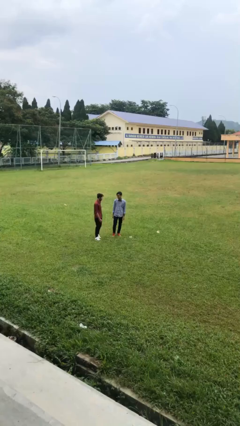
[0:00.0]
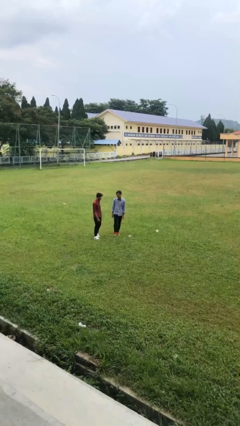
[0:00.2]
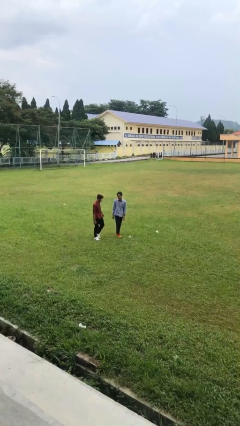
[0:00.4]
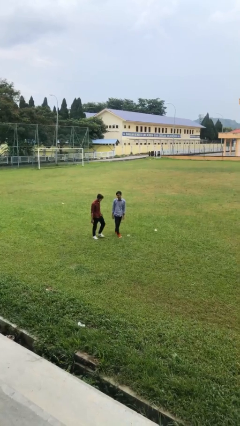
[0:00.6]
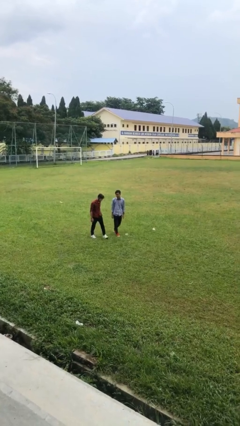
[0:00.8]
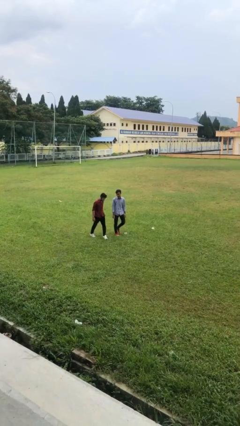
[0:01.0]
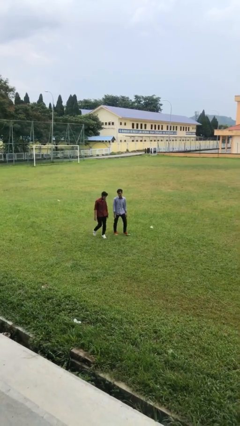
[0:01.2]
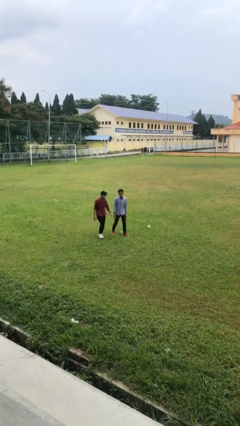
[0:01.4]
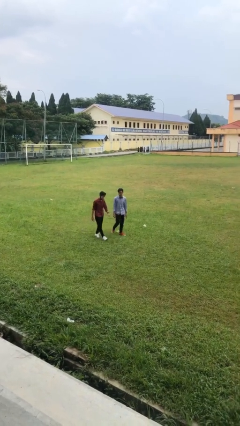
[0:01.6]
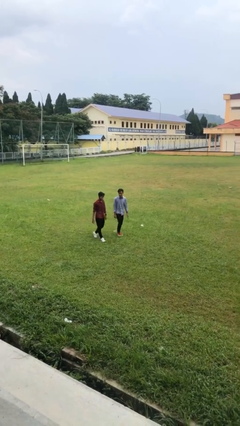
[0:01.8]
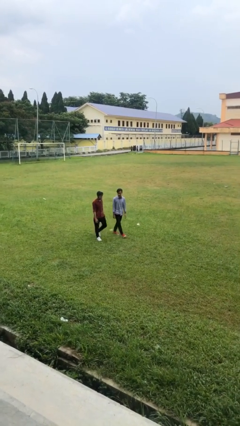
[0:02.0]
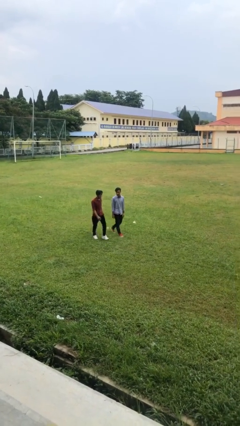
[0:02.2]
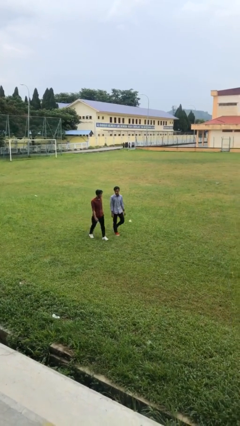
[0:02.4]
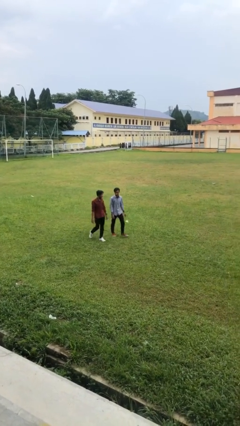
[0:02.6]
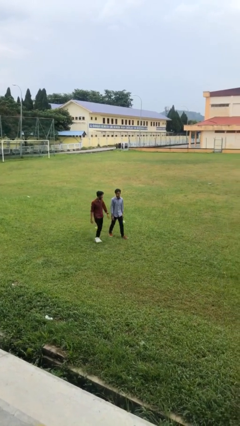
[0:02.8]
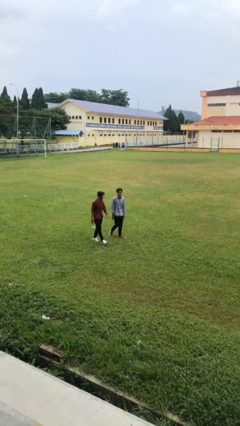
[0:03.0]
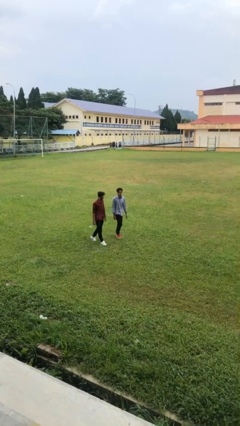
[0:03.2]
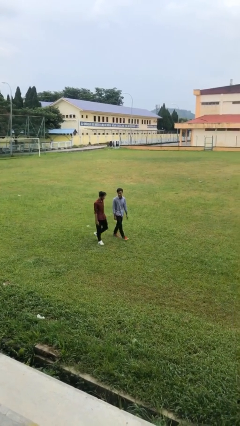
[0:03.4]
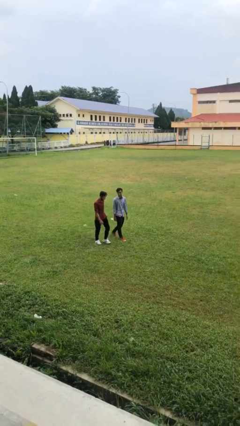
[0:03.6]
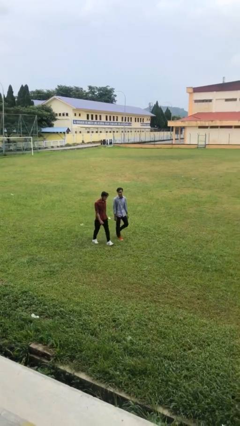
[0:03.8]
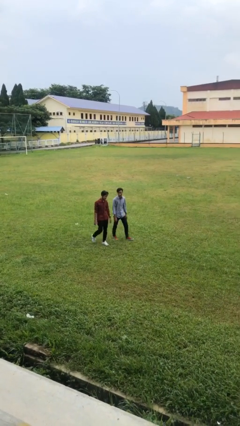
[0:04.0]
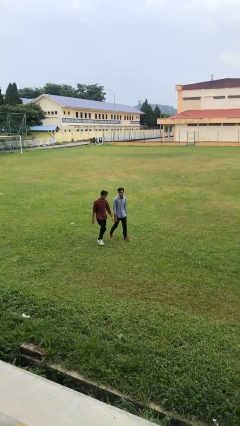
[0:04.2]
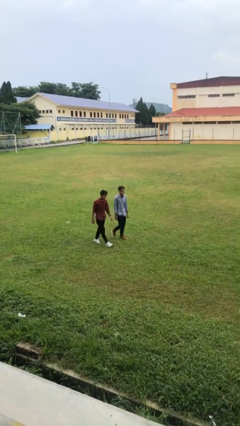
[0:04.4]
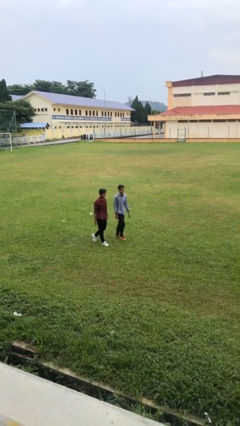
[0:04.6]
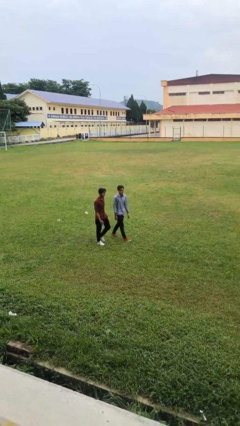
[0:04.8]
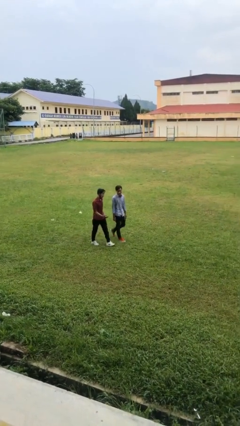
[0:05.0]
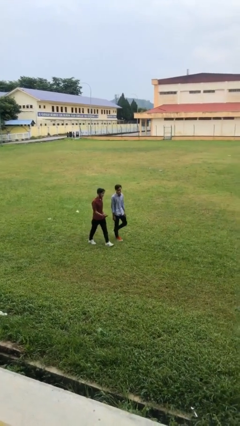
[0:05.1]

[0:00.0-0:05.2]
person talks to person

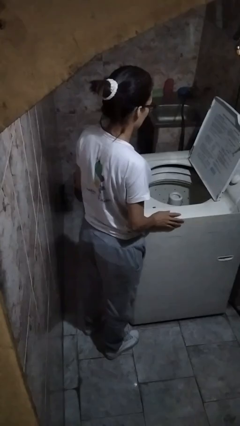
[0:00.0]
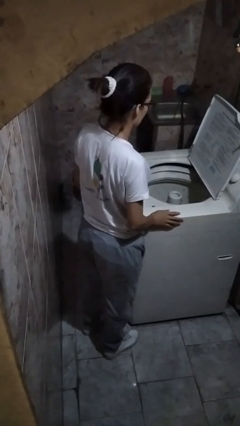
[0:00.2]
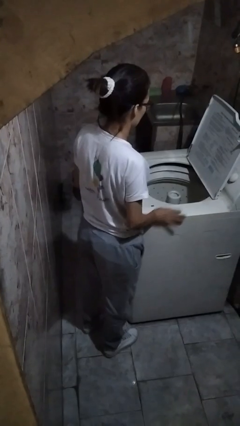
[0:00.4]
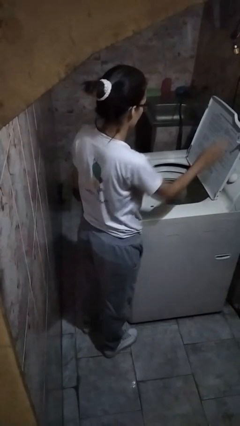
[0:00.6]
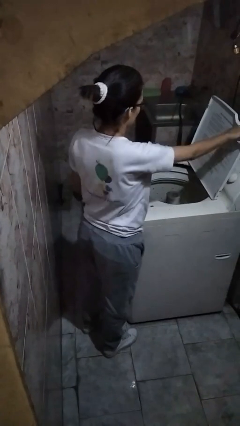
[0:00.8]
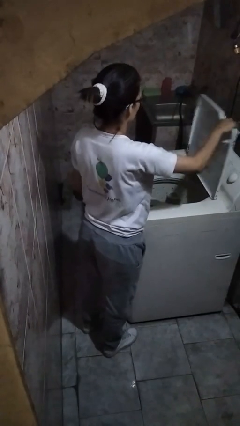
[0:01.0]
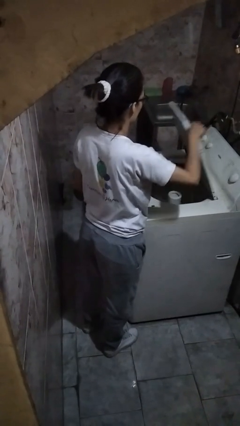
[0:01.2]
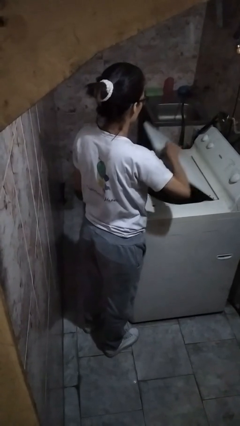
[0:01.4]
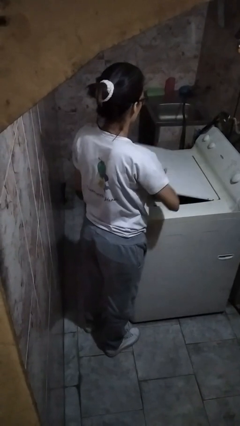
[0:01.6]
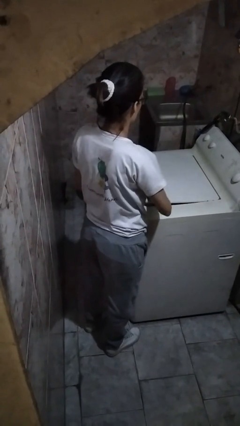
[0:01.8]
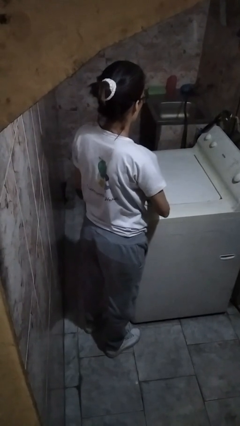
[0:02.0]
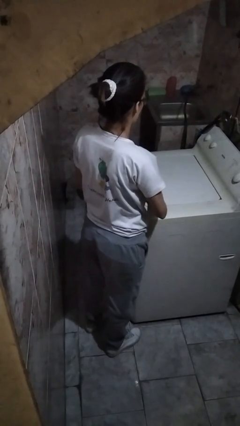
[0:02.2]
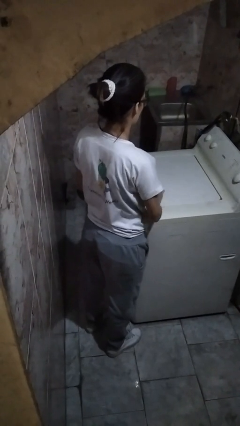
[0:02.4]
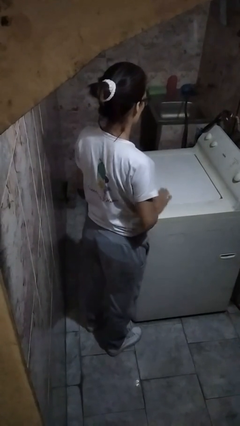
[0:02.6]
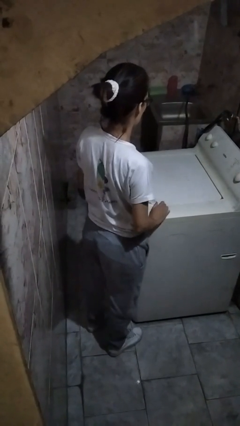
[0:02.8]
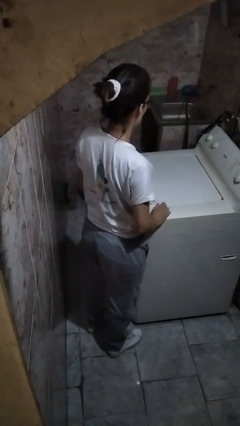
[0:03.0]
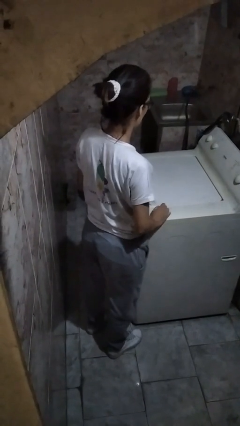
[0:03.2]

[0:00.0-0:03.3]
person closes clothes washer

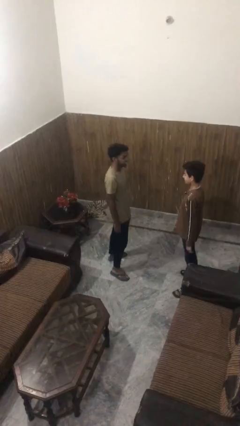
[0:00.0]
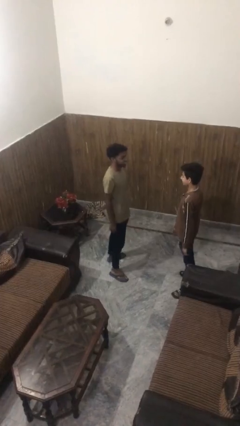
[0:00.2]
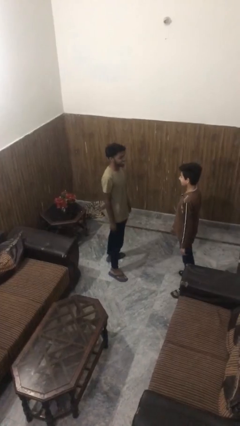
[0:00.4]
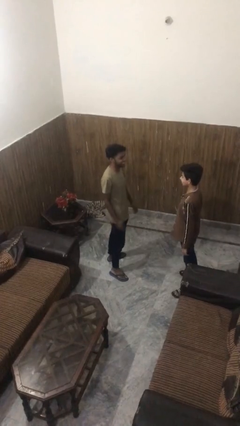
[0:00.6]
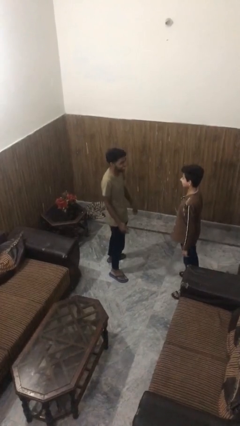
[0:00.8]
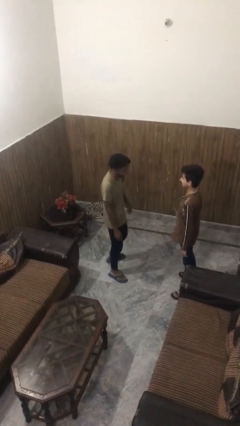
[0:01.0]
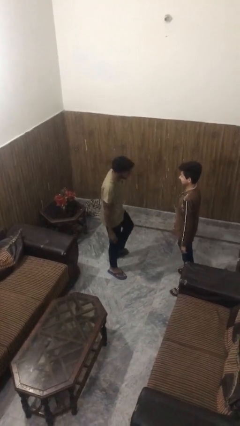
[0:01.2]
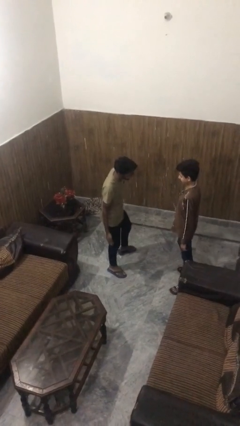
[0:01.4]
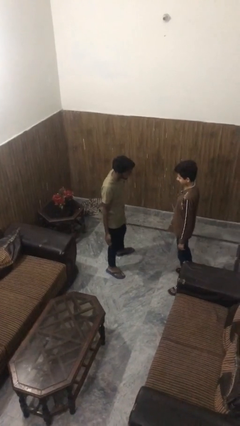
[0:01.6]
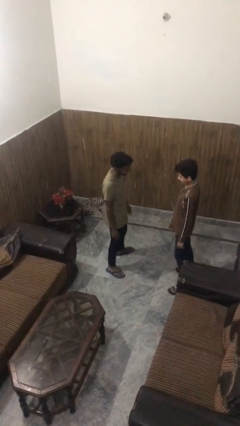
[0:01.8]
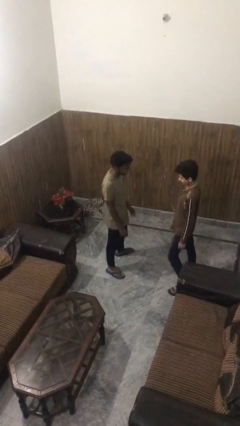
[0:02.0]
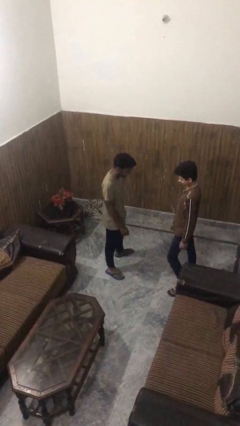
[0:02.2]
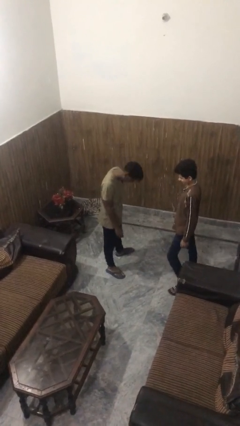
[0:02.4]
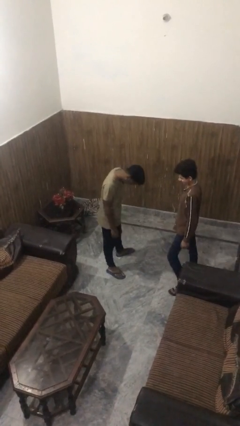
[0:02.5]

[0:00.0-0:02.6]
person laughs with person

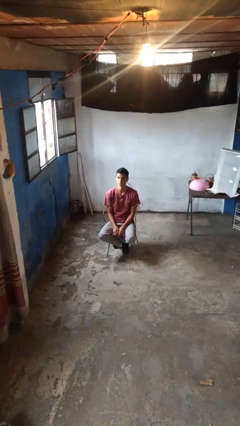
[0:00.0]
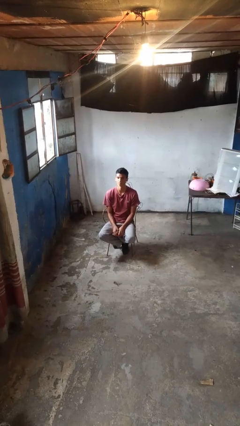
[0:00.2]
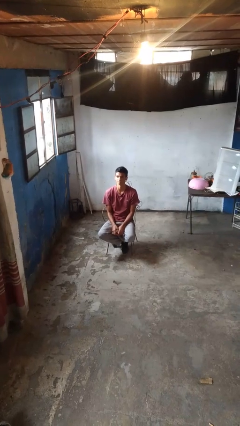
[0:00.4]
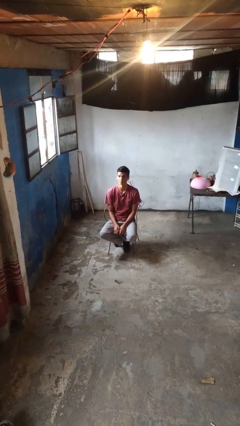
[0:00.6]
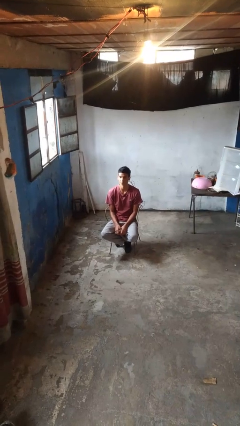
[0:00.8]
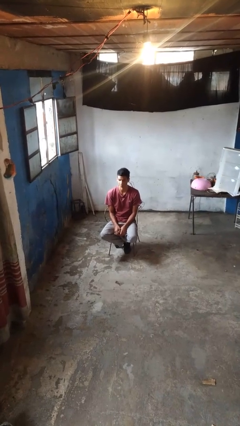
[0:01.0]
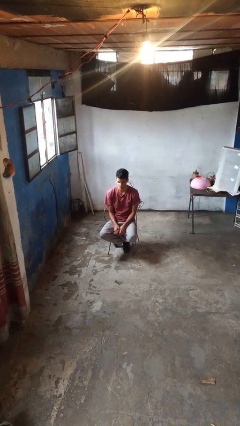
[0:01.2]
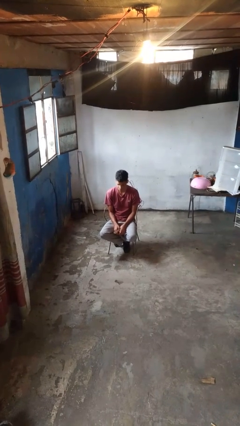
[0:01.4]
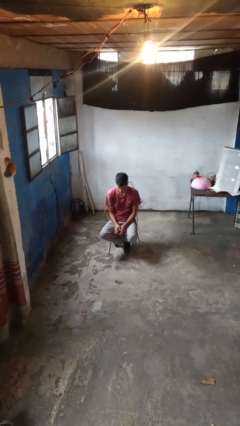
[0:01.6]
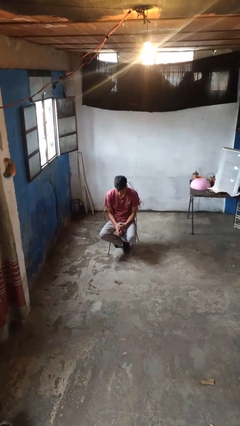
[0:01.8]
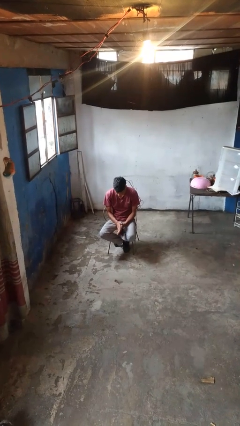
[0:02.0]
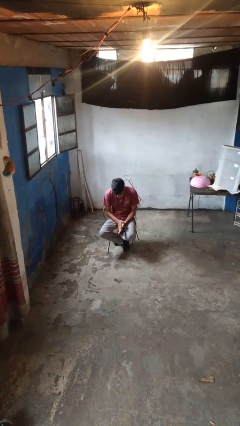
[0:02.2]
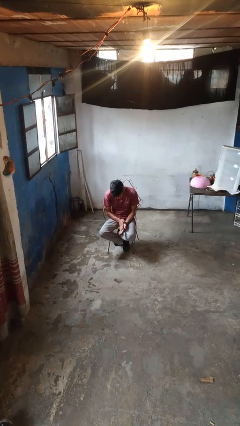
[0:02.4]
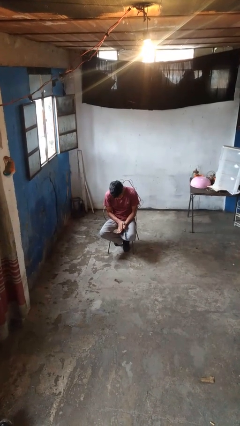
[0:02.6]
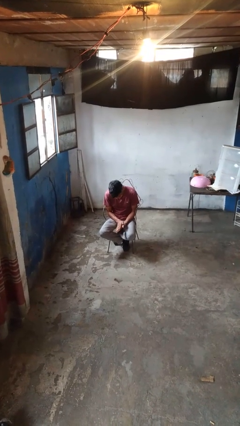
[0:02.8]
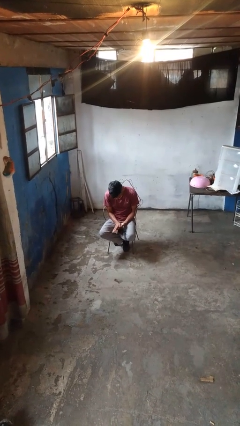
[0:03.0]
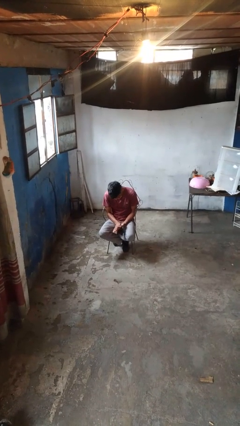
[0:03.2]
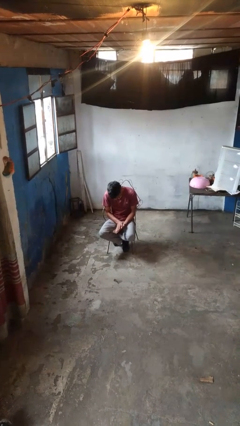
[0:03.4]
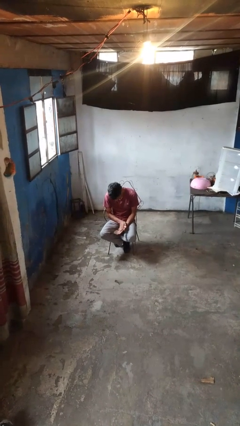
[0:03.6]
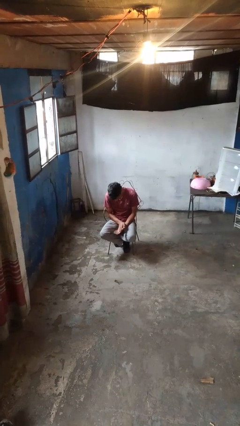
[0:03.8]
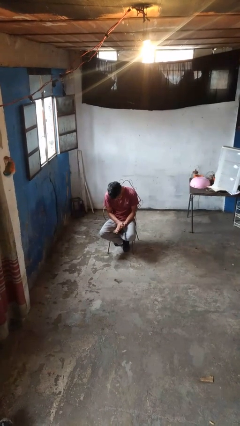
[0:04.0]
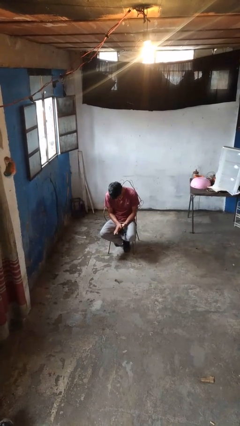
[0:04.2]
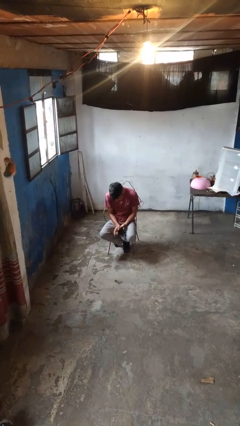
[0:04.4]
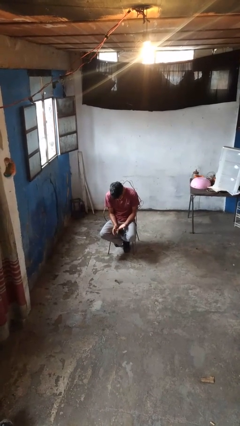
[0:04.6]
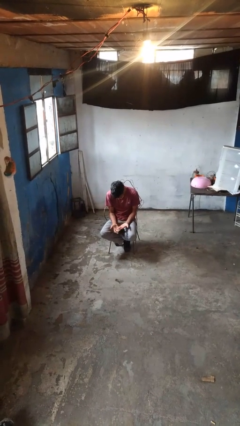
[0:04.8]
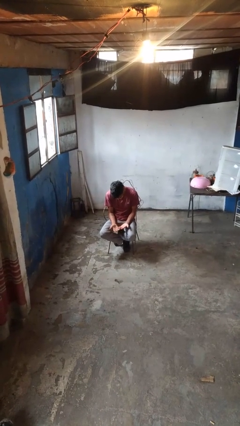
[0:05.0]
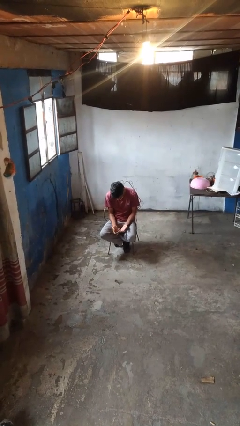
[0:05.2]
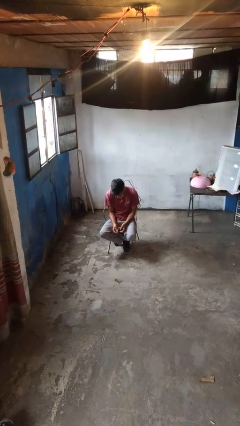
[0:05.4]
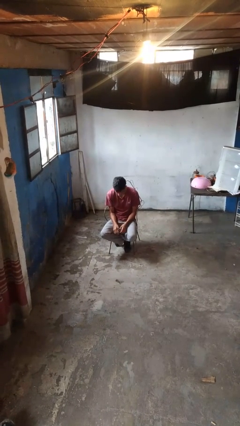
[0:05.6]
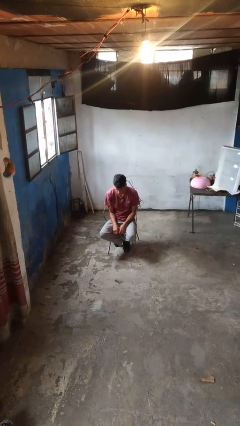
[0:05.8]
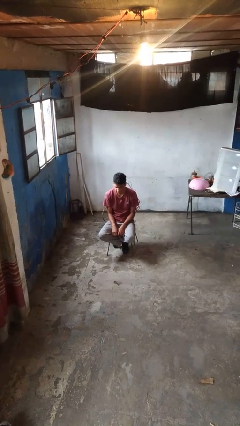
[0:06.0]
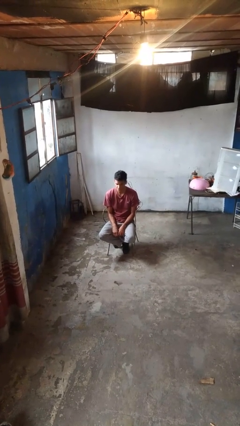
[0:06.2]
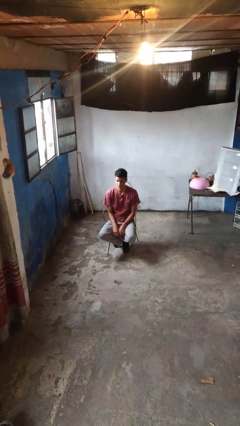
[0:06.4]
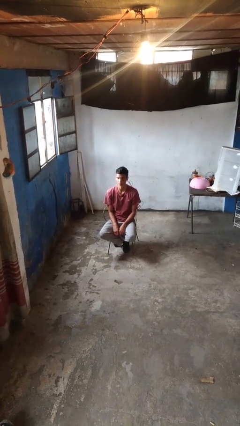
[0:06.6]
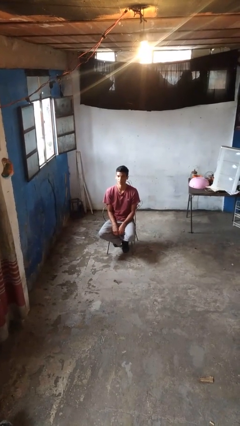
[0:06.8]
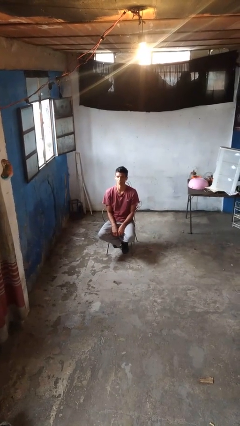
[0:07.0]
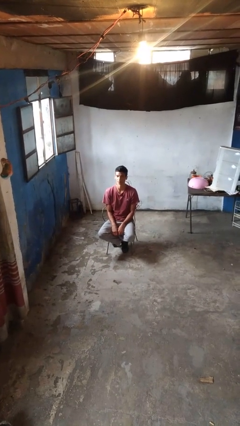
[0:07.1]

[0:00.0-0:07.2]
person looks at hands in lap
